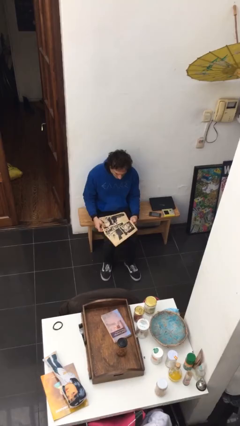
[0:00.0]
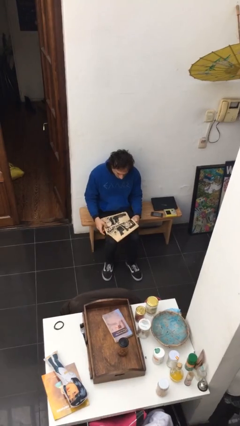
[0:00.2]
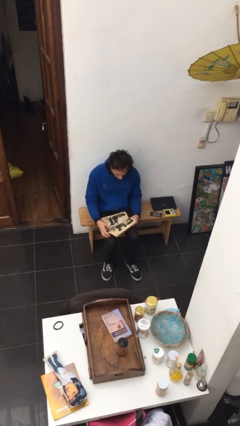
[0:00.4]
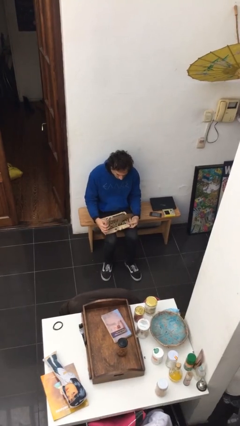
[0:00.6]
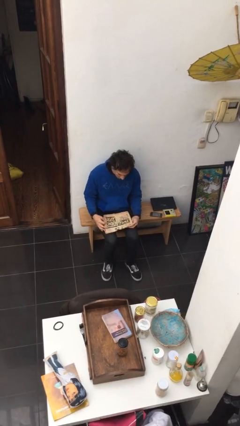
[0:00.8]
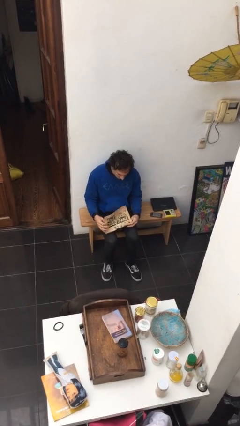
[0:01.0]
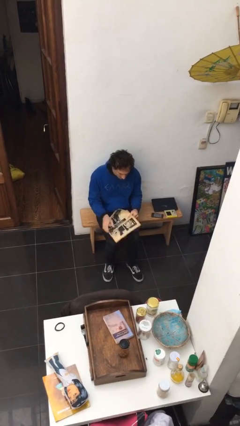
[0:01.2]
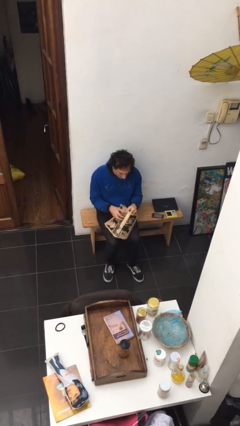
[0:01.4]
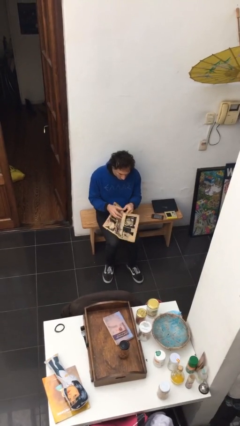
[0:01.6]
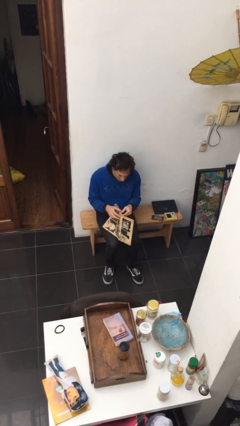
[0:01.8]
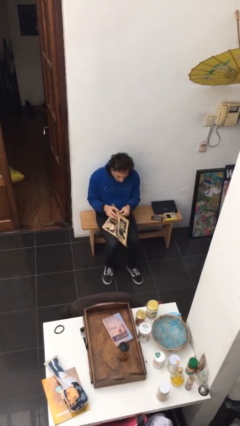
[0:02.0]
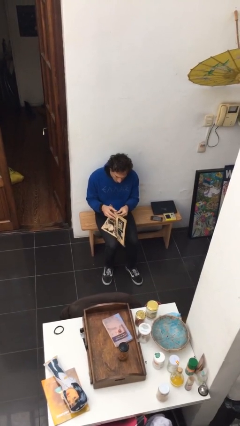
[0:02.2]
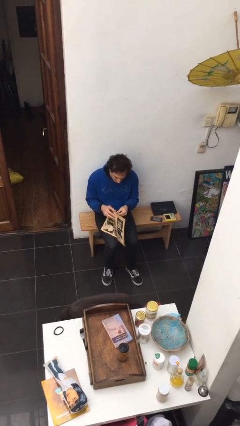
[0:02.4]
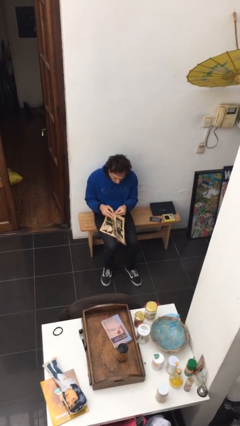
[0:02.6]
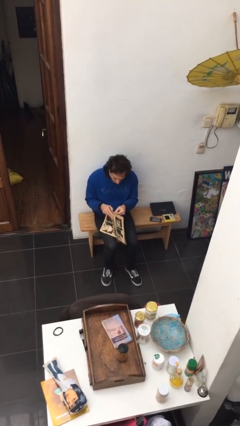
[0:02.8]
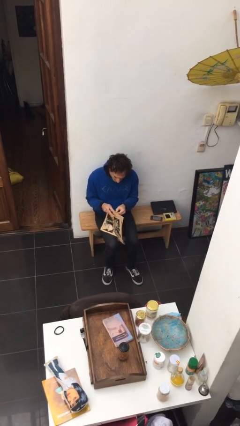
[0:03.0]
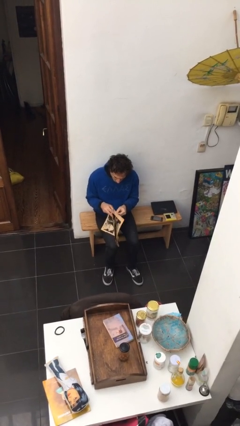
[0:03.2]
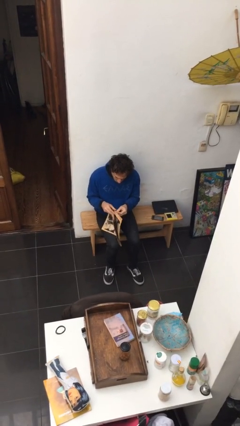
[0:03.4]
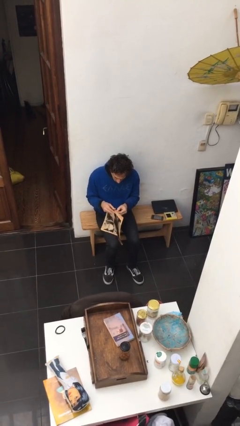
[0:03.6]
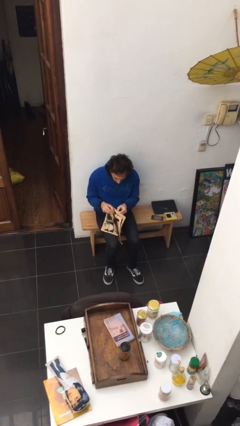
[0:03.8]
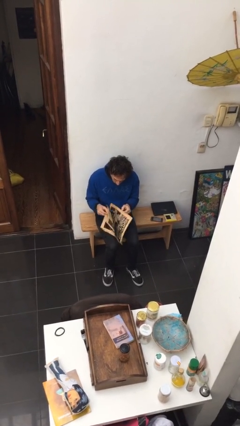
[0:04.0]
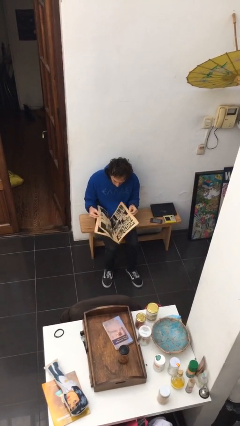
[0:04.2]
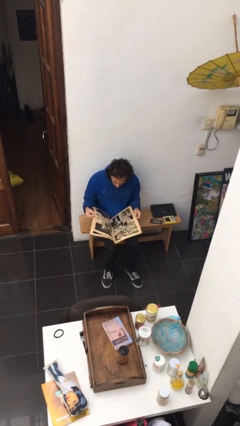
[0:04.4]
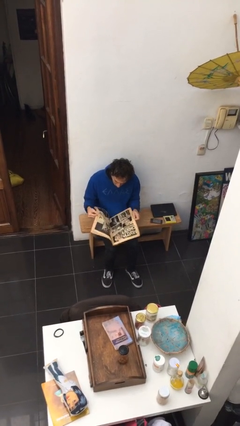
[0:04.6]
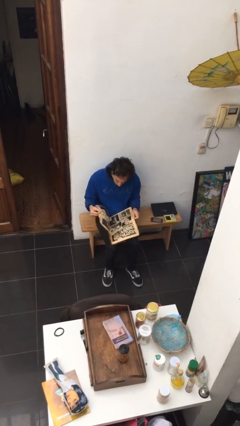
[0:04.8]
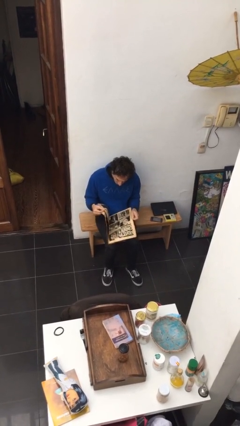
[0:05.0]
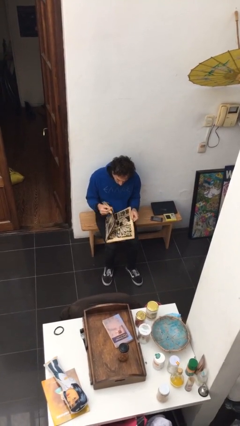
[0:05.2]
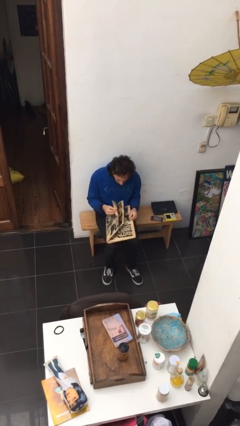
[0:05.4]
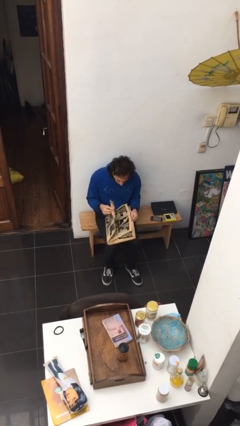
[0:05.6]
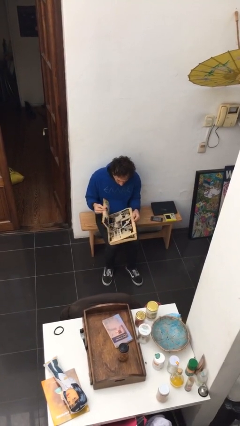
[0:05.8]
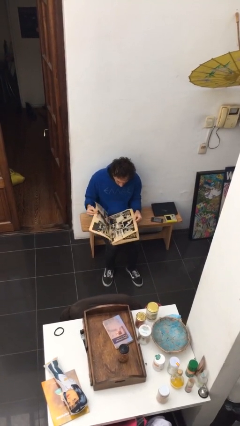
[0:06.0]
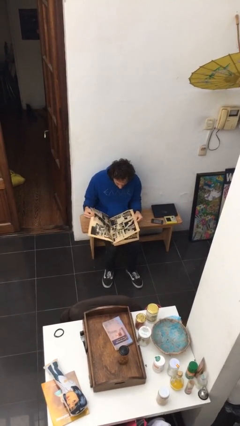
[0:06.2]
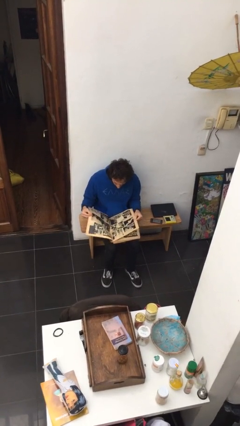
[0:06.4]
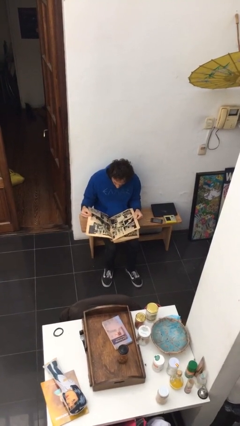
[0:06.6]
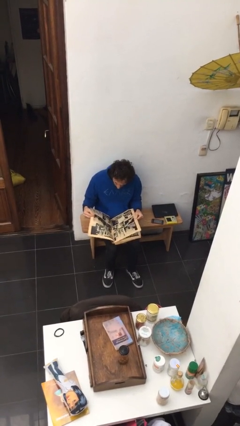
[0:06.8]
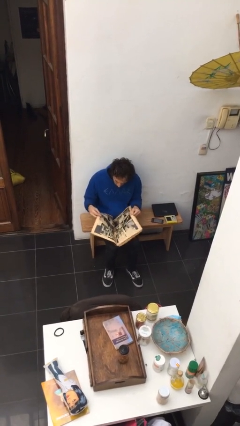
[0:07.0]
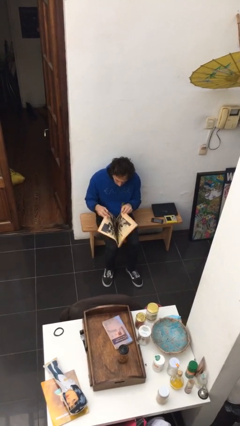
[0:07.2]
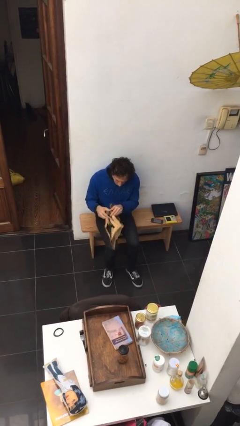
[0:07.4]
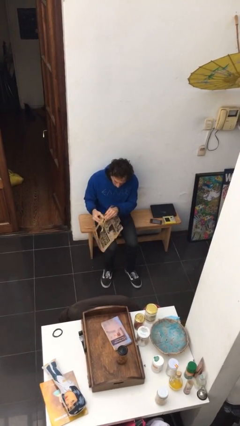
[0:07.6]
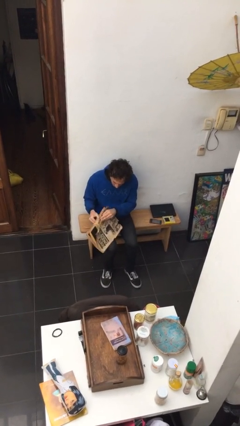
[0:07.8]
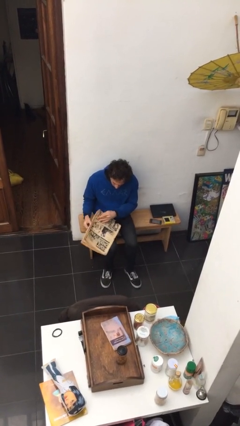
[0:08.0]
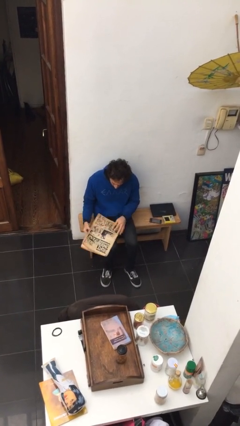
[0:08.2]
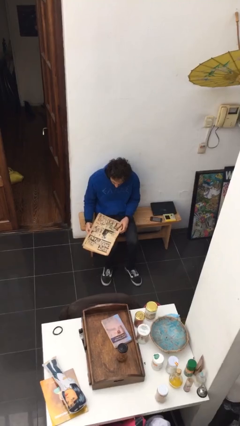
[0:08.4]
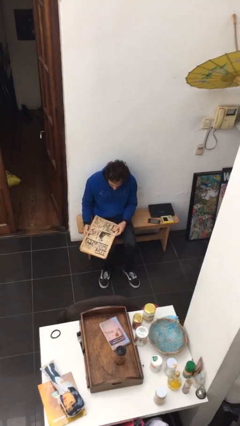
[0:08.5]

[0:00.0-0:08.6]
person reads newspaper

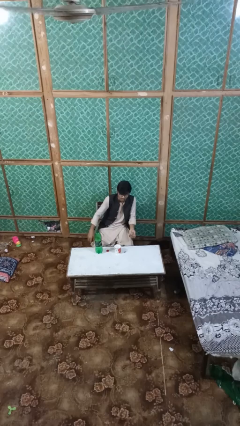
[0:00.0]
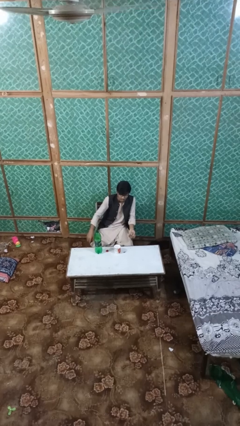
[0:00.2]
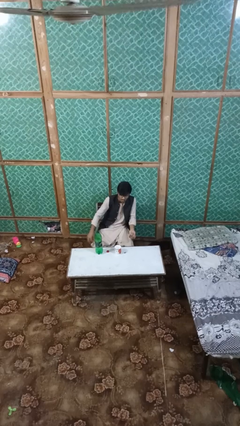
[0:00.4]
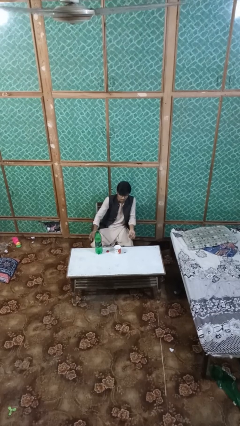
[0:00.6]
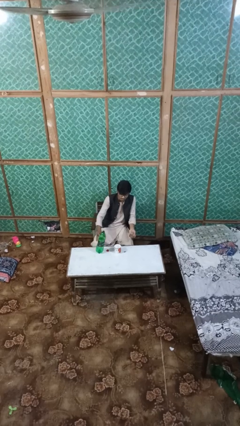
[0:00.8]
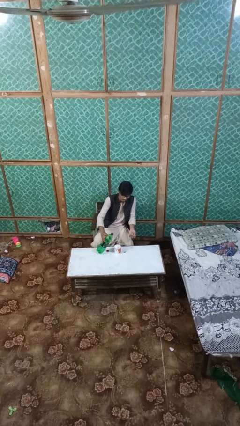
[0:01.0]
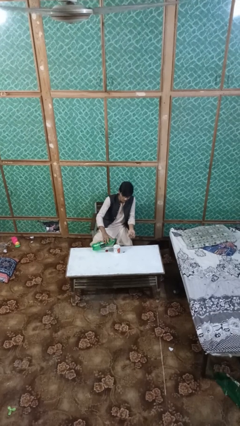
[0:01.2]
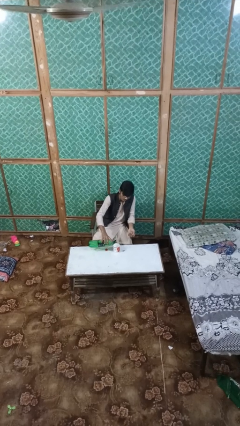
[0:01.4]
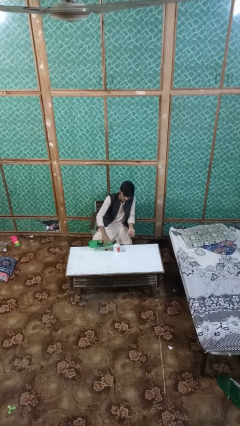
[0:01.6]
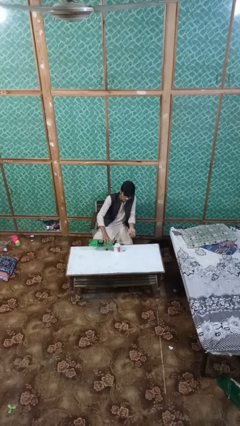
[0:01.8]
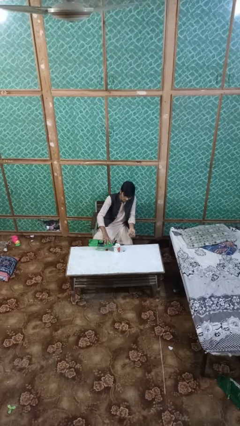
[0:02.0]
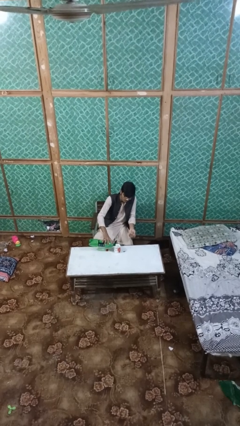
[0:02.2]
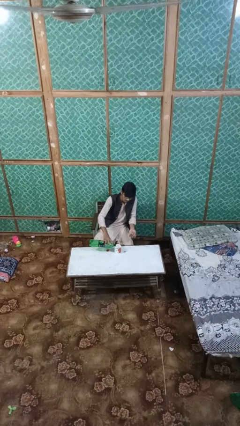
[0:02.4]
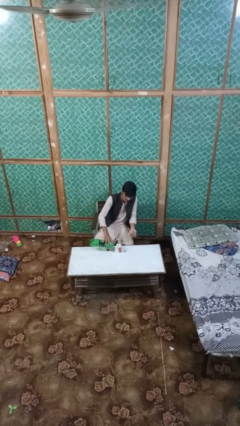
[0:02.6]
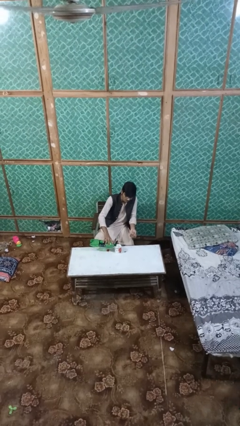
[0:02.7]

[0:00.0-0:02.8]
person pours liquid into cup

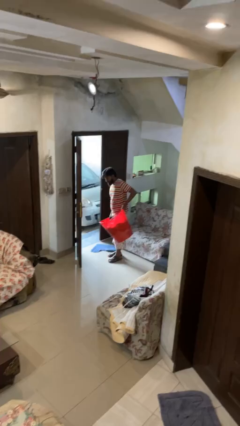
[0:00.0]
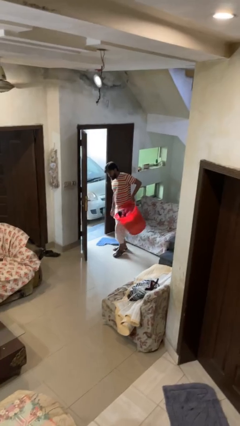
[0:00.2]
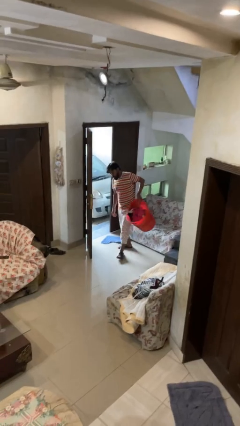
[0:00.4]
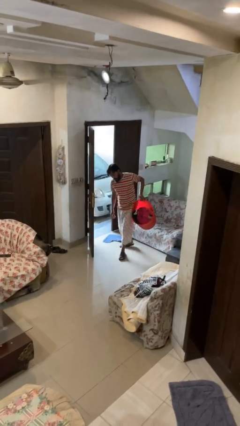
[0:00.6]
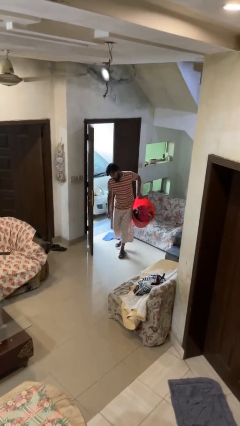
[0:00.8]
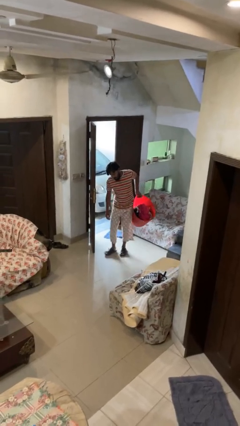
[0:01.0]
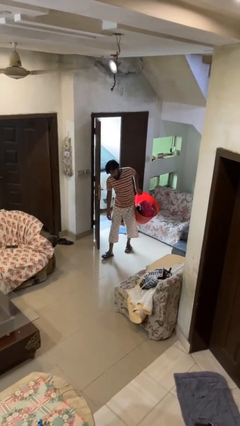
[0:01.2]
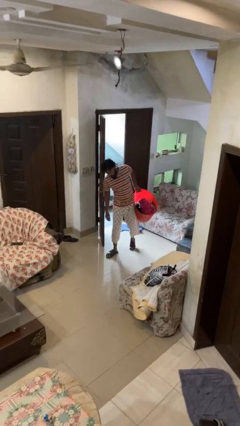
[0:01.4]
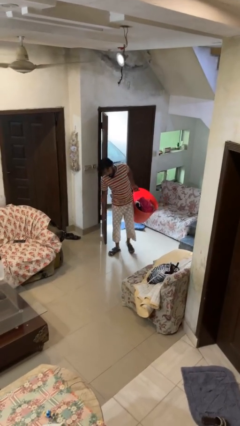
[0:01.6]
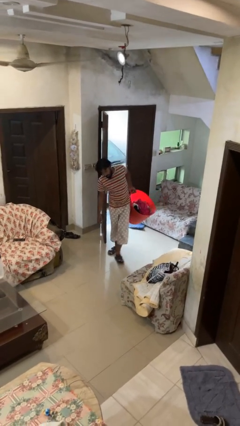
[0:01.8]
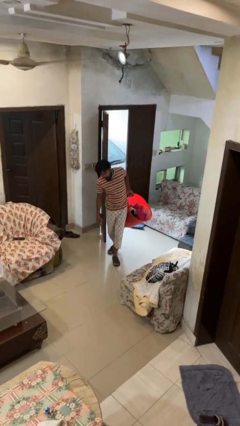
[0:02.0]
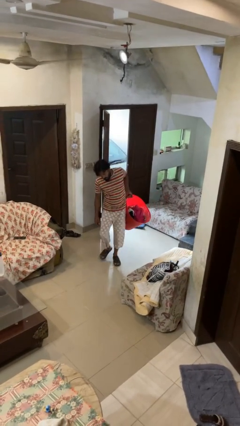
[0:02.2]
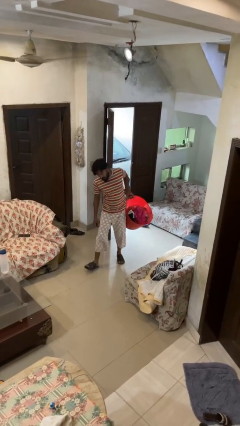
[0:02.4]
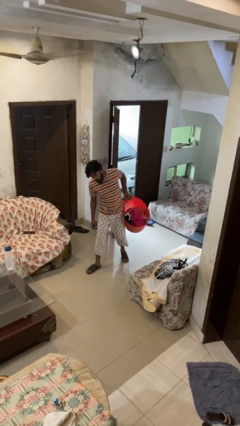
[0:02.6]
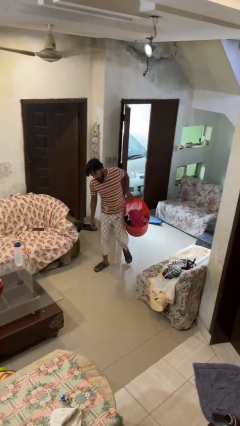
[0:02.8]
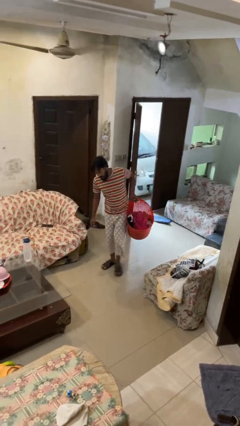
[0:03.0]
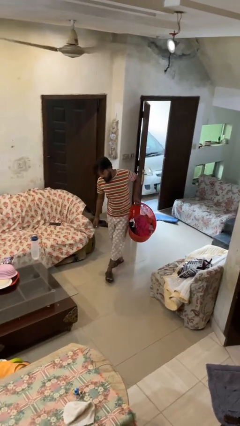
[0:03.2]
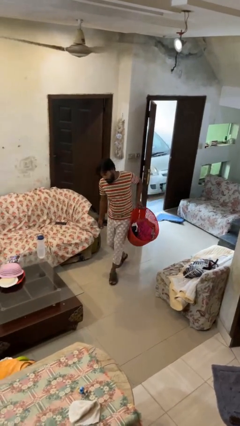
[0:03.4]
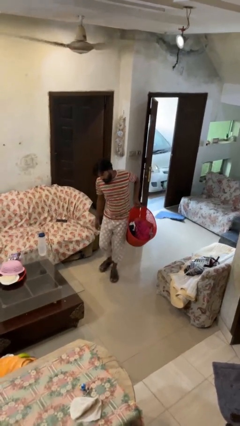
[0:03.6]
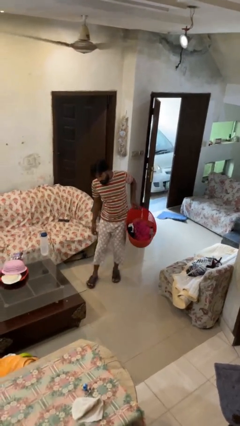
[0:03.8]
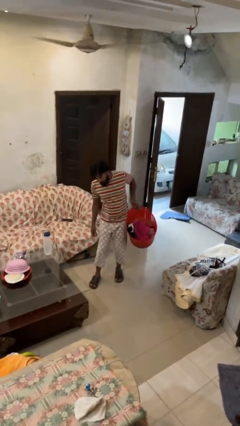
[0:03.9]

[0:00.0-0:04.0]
person carries laundry basket

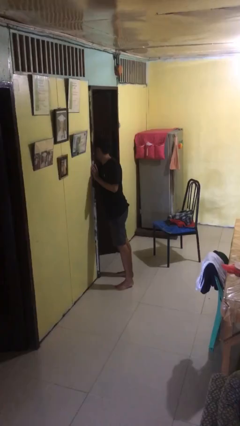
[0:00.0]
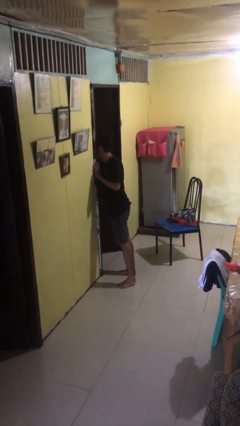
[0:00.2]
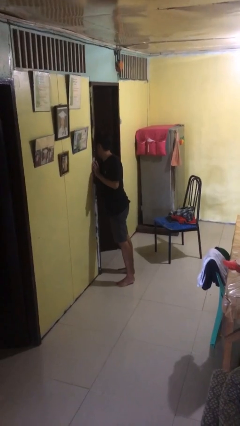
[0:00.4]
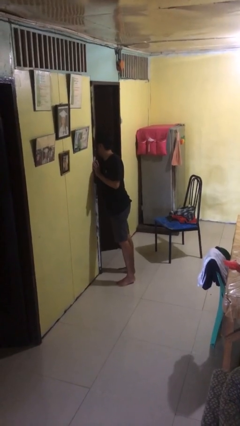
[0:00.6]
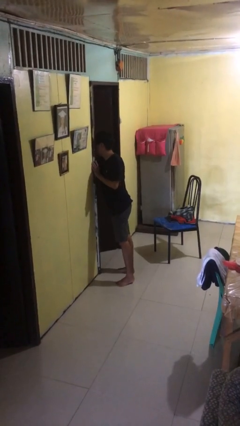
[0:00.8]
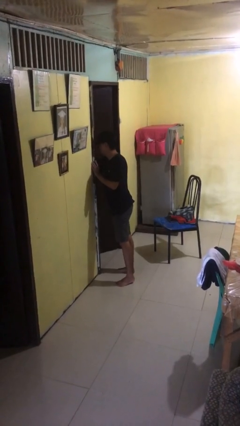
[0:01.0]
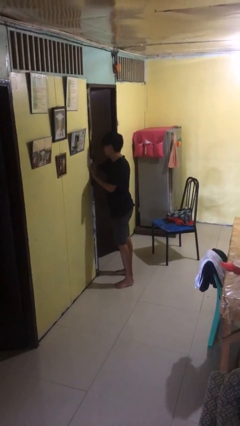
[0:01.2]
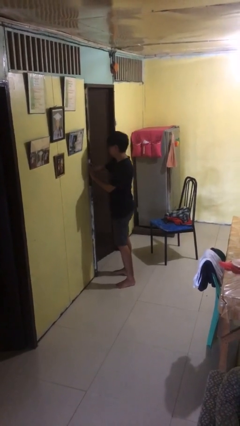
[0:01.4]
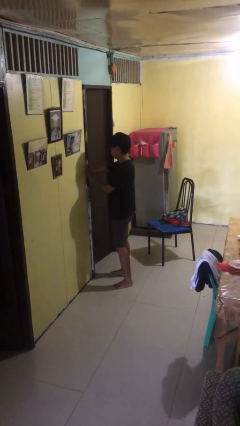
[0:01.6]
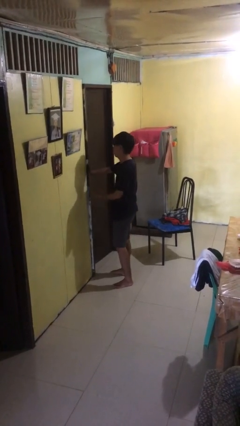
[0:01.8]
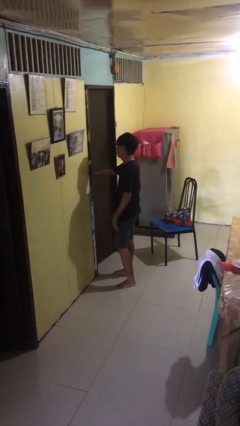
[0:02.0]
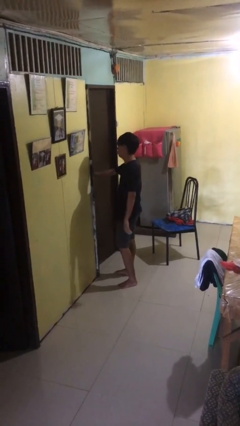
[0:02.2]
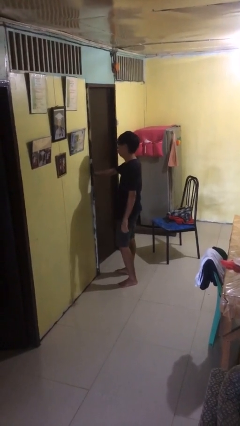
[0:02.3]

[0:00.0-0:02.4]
person closes facility door
